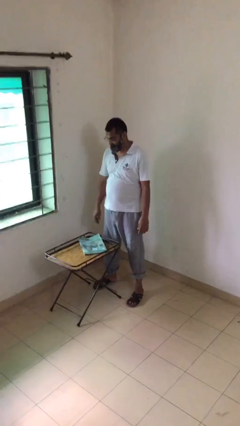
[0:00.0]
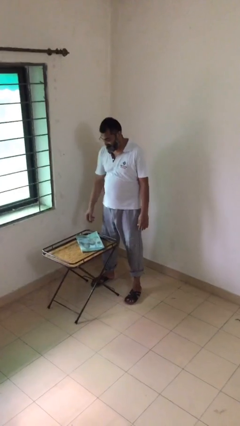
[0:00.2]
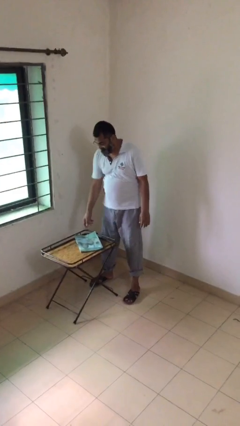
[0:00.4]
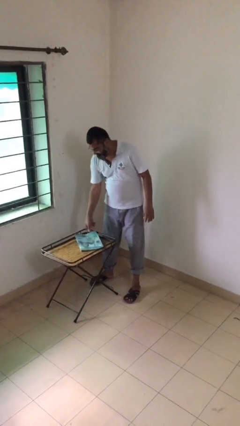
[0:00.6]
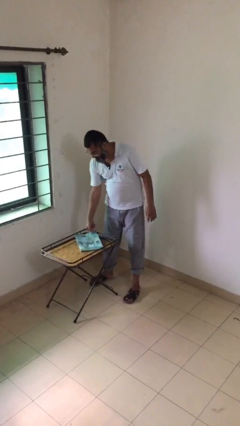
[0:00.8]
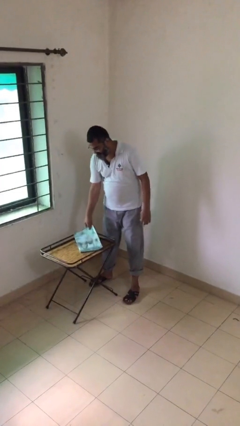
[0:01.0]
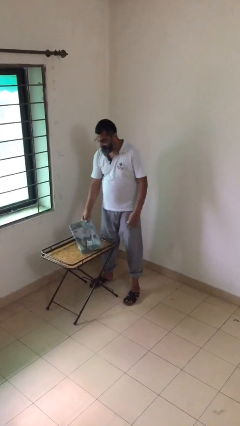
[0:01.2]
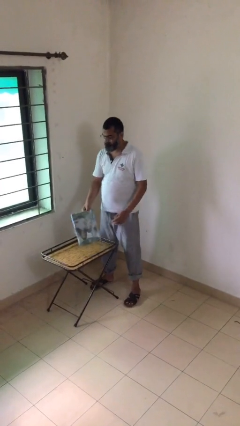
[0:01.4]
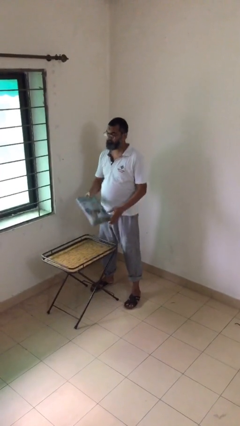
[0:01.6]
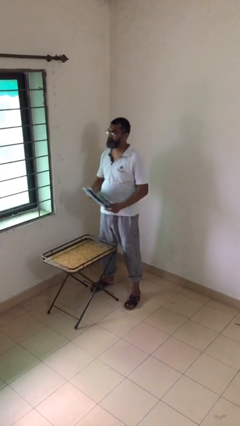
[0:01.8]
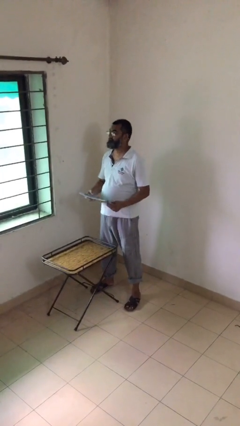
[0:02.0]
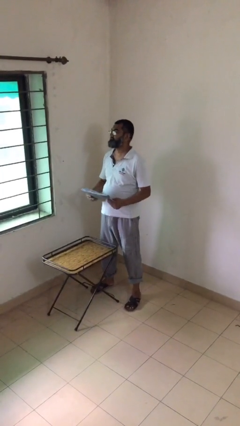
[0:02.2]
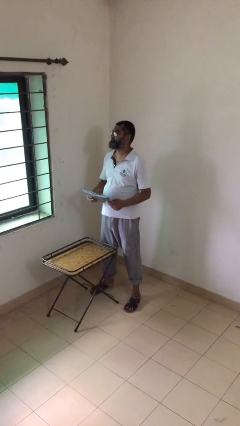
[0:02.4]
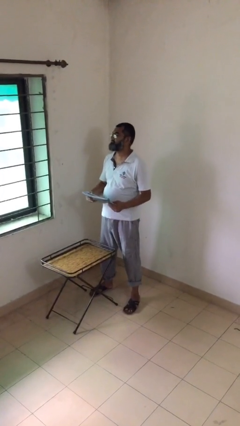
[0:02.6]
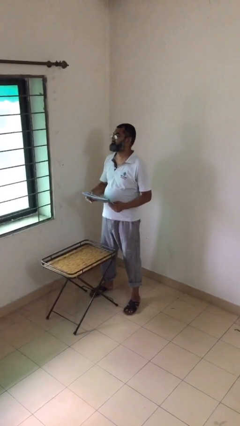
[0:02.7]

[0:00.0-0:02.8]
person picks up object from table

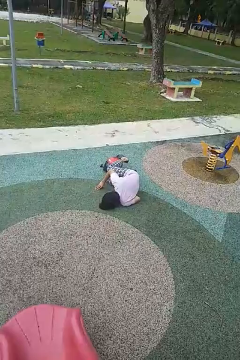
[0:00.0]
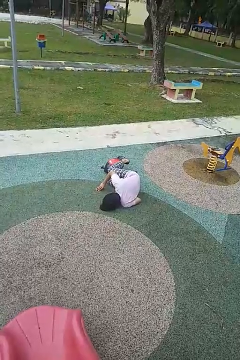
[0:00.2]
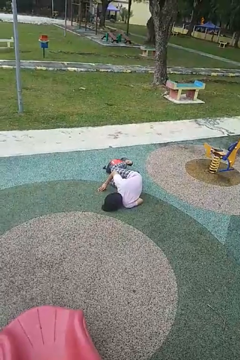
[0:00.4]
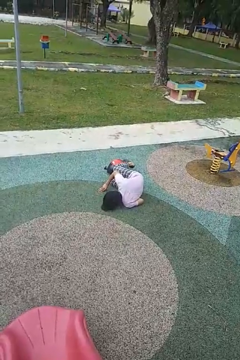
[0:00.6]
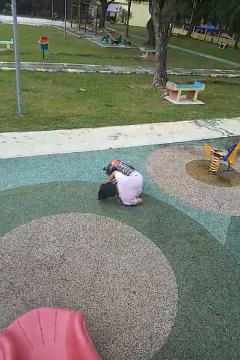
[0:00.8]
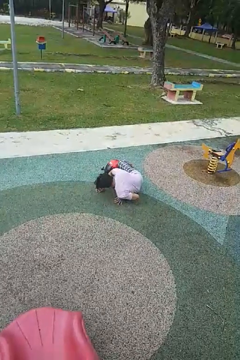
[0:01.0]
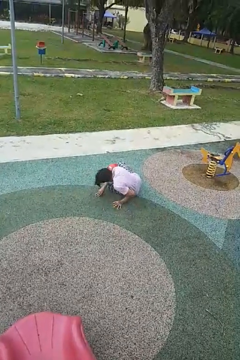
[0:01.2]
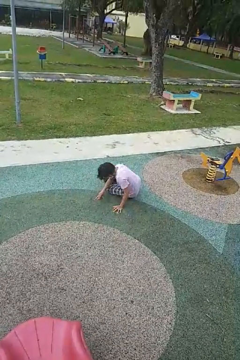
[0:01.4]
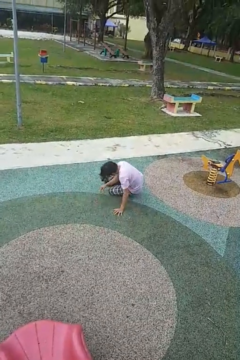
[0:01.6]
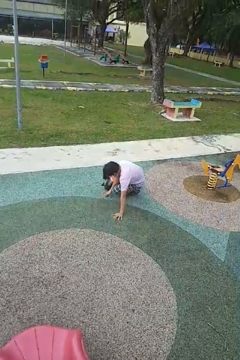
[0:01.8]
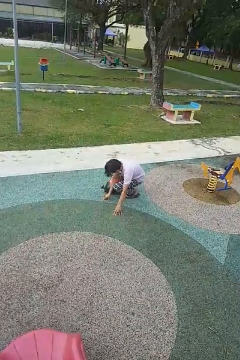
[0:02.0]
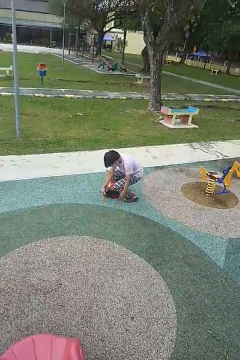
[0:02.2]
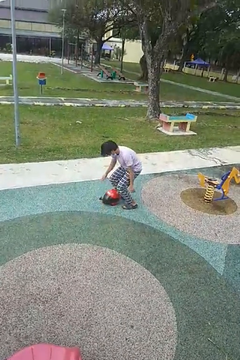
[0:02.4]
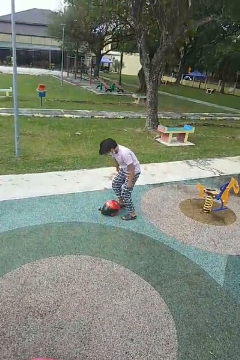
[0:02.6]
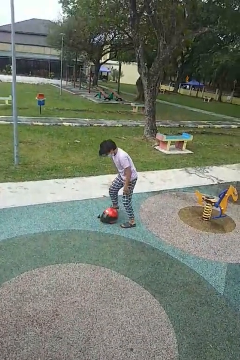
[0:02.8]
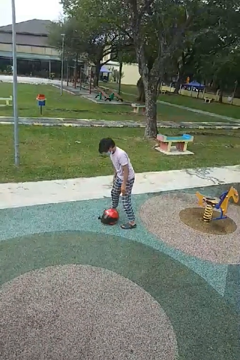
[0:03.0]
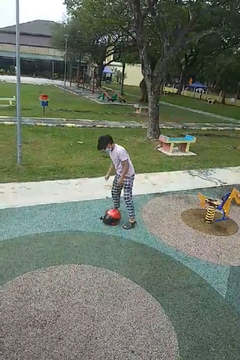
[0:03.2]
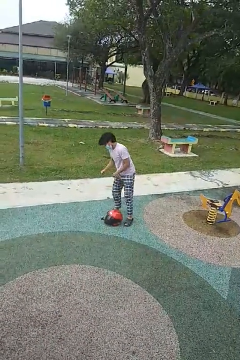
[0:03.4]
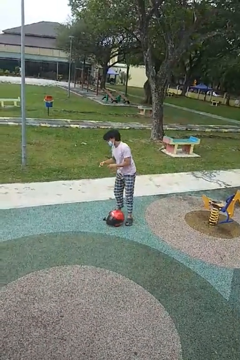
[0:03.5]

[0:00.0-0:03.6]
person stands up from floor

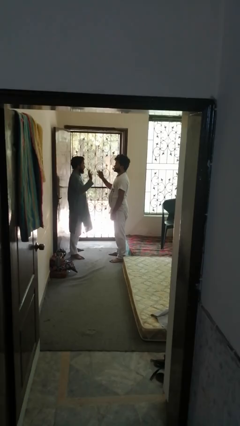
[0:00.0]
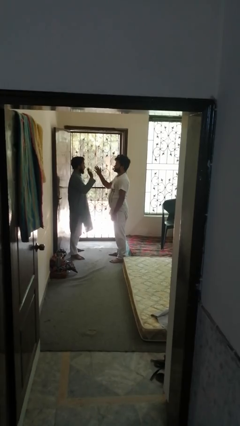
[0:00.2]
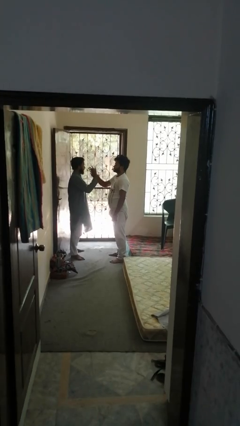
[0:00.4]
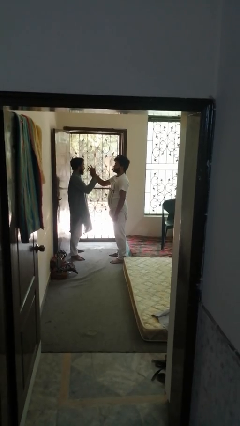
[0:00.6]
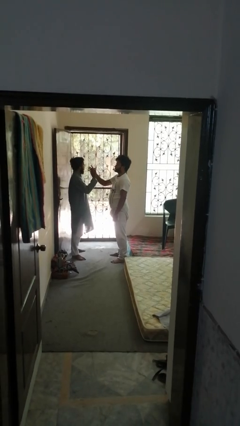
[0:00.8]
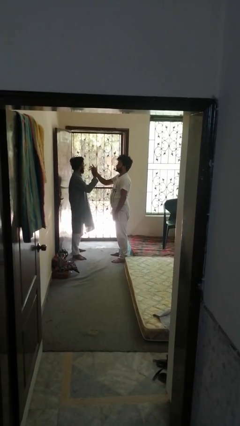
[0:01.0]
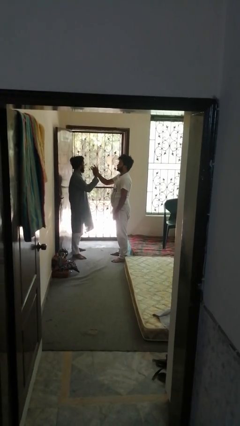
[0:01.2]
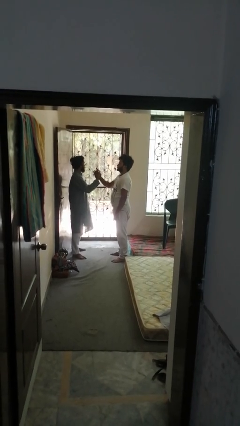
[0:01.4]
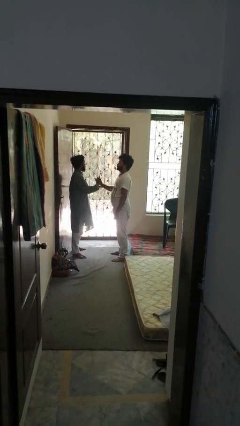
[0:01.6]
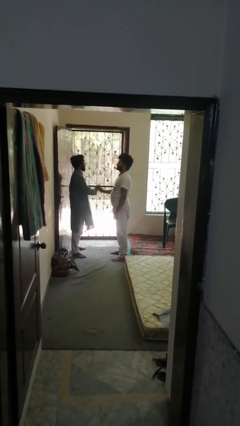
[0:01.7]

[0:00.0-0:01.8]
person highfives hand

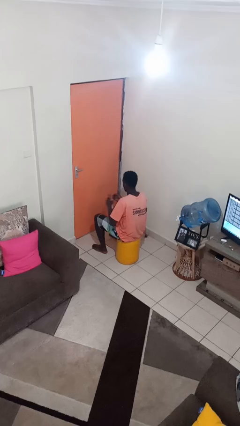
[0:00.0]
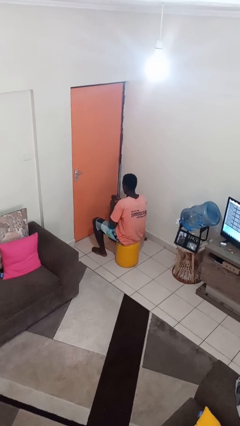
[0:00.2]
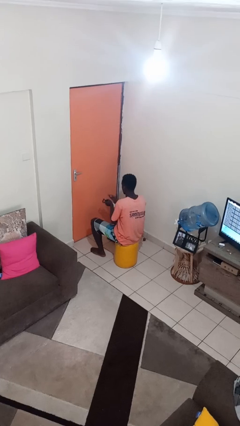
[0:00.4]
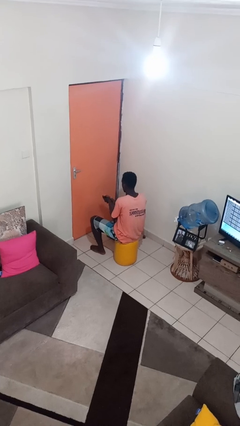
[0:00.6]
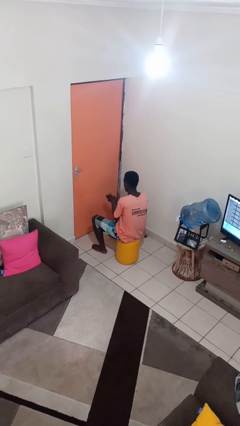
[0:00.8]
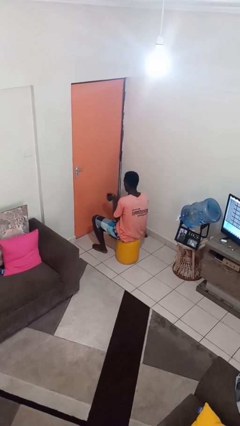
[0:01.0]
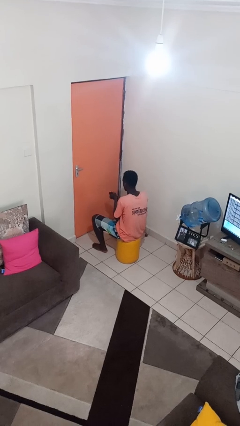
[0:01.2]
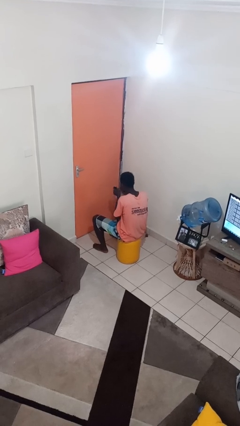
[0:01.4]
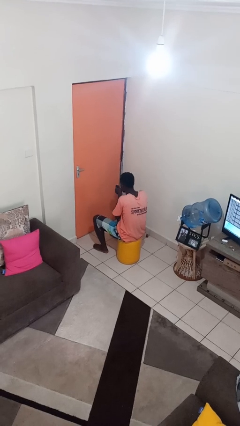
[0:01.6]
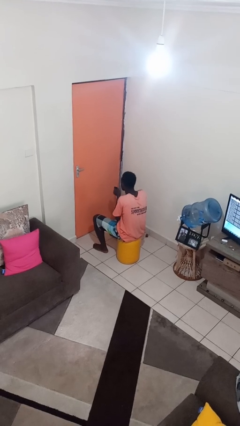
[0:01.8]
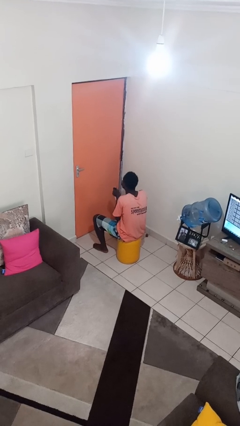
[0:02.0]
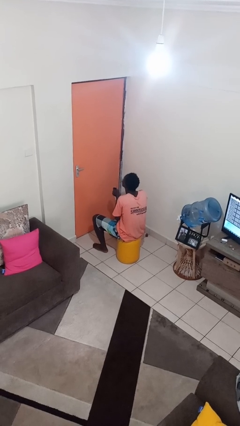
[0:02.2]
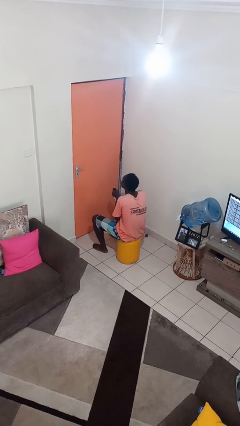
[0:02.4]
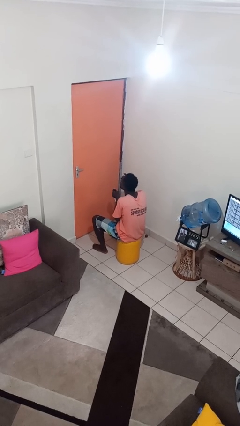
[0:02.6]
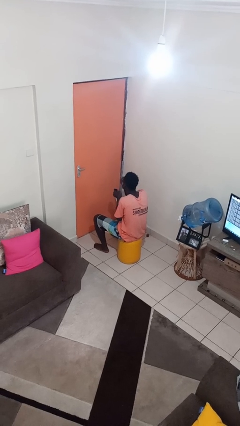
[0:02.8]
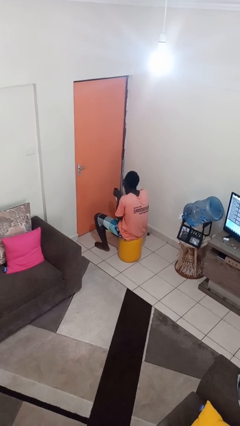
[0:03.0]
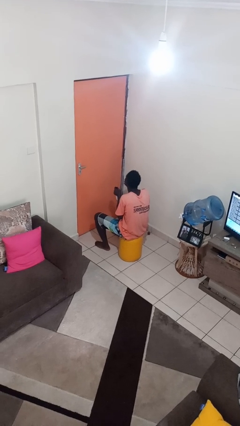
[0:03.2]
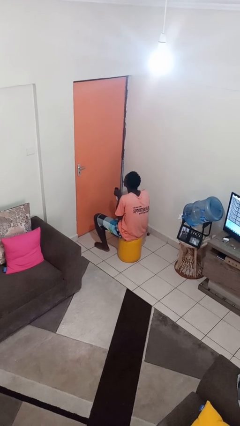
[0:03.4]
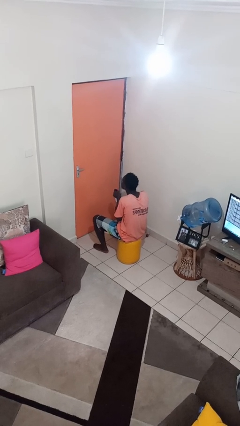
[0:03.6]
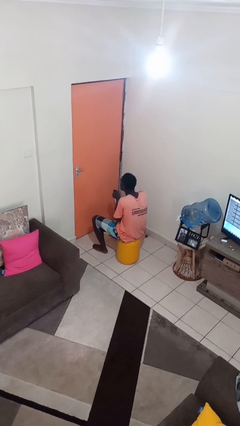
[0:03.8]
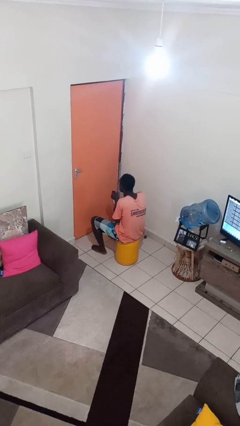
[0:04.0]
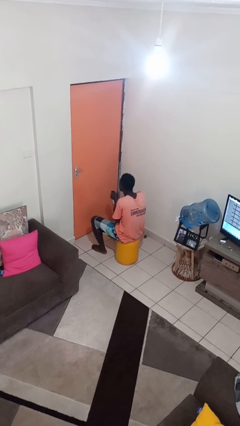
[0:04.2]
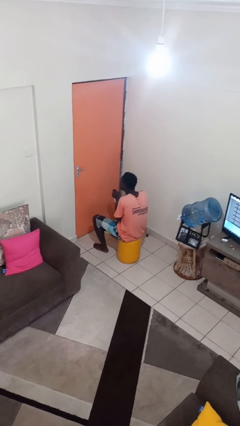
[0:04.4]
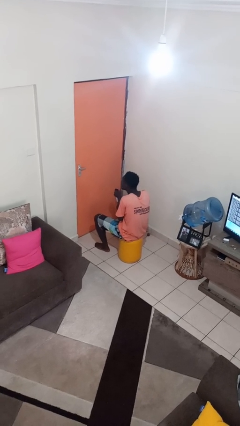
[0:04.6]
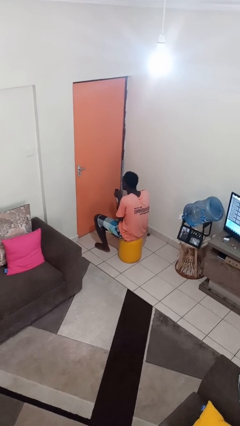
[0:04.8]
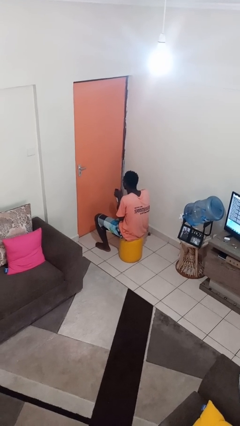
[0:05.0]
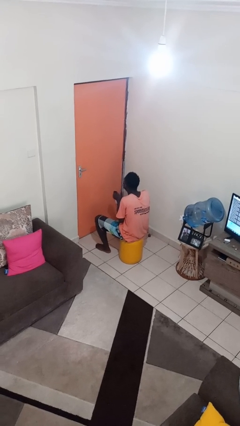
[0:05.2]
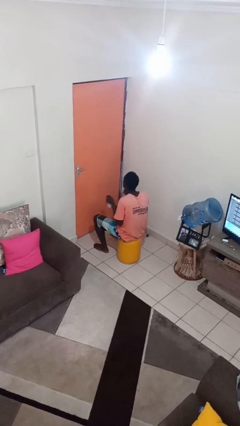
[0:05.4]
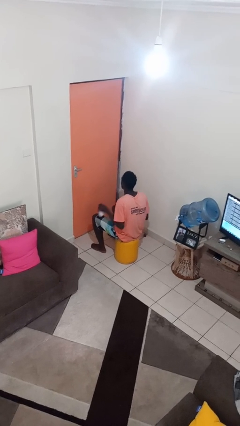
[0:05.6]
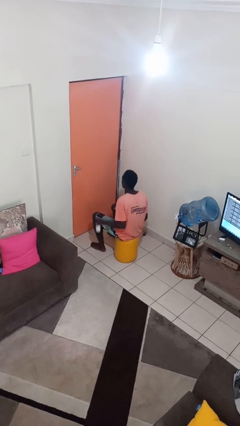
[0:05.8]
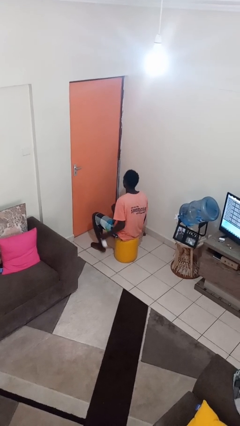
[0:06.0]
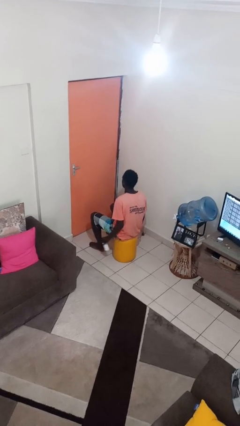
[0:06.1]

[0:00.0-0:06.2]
person applies sunscreen

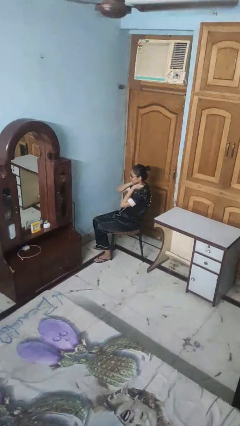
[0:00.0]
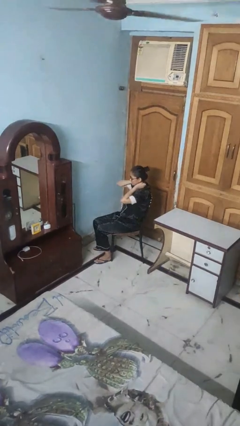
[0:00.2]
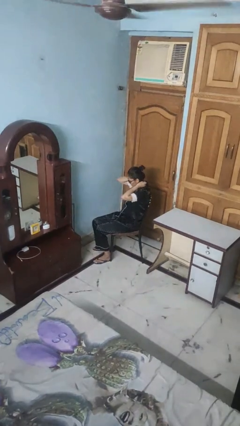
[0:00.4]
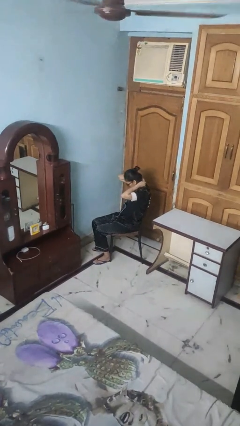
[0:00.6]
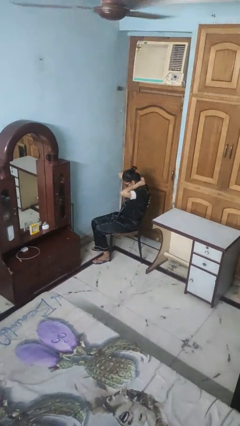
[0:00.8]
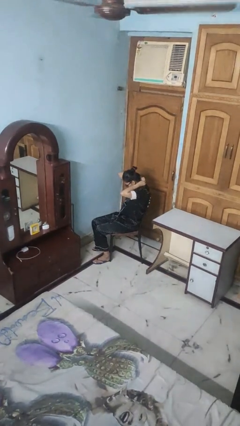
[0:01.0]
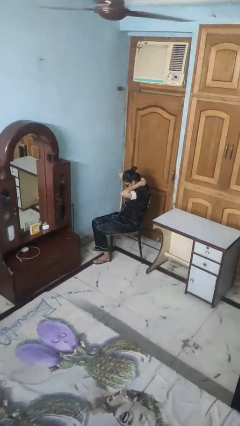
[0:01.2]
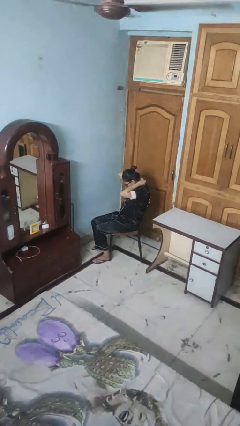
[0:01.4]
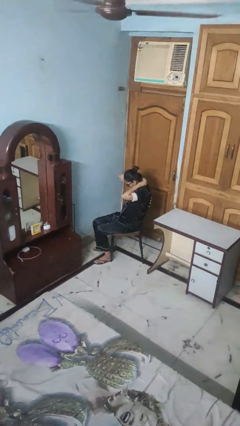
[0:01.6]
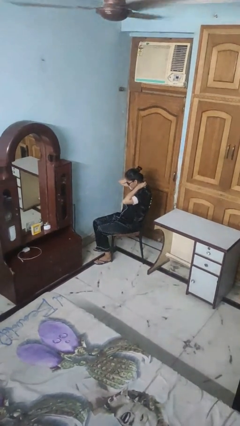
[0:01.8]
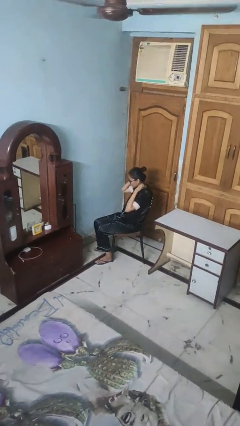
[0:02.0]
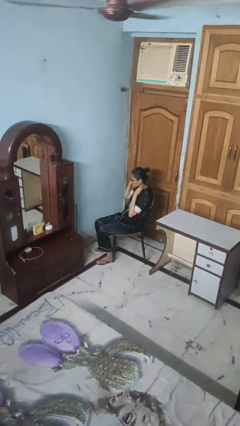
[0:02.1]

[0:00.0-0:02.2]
person takes off necklace

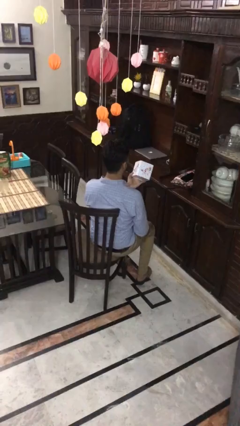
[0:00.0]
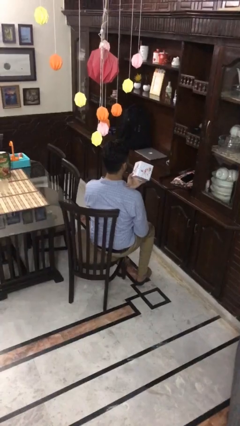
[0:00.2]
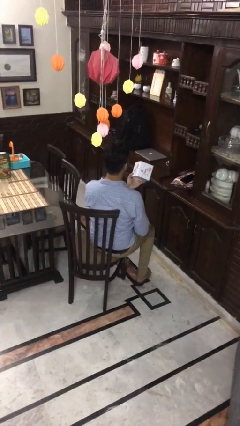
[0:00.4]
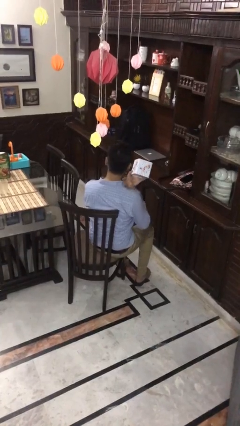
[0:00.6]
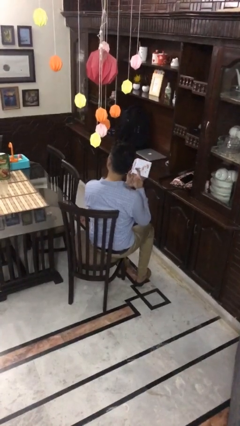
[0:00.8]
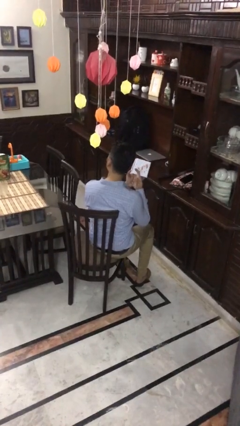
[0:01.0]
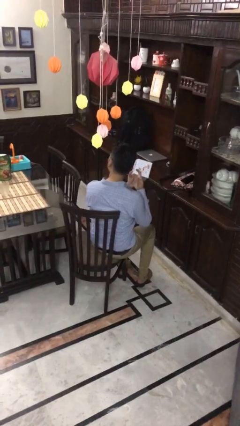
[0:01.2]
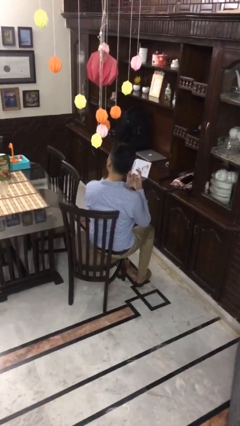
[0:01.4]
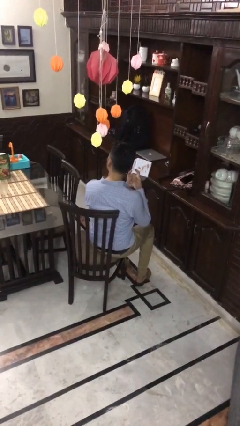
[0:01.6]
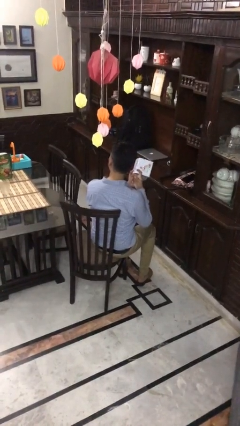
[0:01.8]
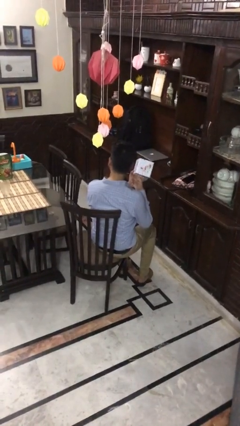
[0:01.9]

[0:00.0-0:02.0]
person taps object with finger
